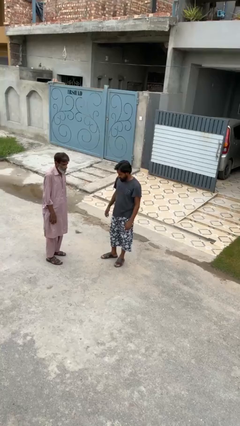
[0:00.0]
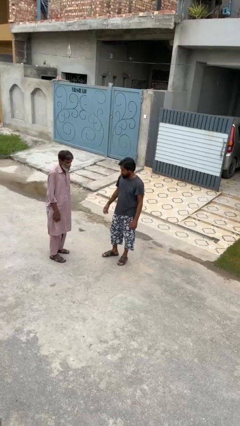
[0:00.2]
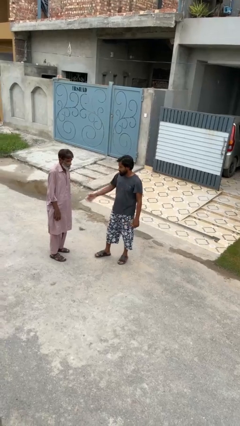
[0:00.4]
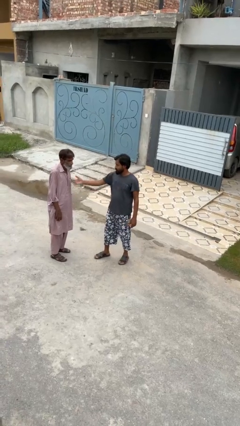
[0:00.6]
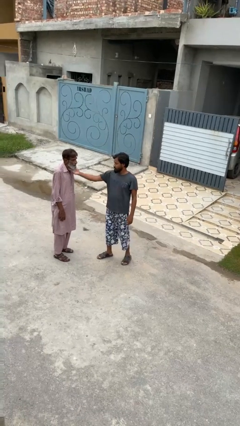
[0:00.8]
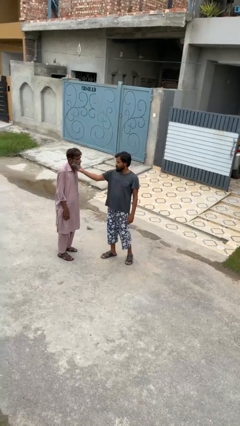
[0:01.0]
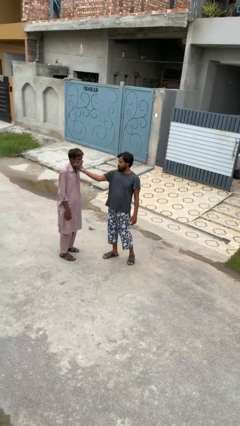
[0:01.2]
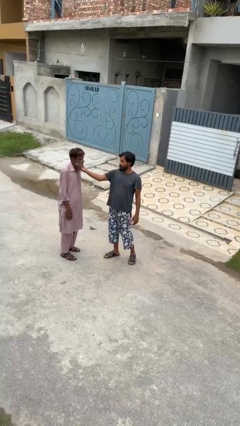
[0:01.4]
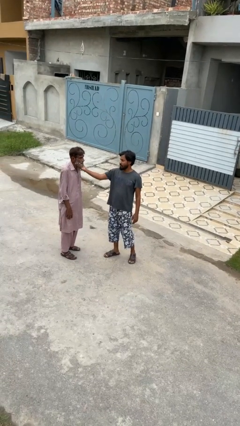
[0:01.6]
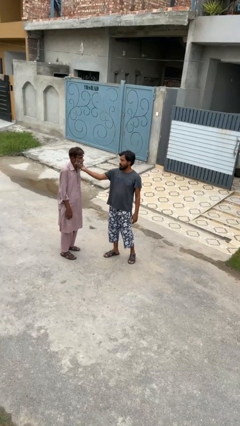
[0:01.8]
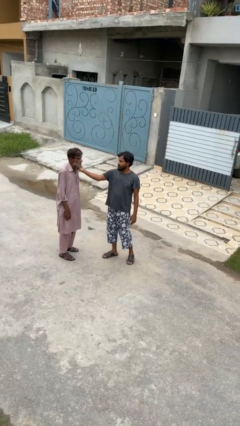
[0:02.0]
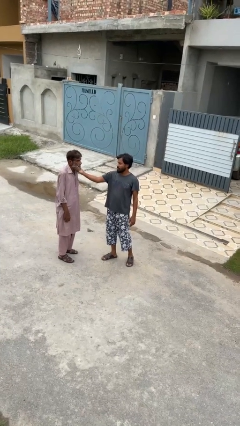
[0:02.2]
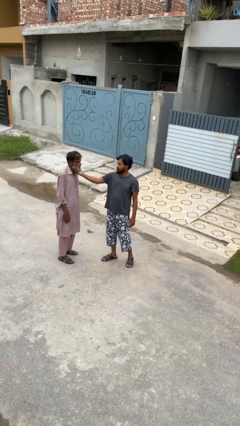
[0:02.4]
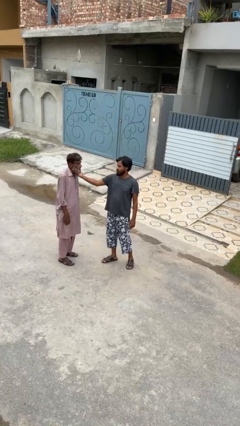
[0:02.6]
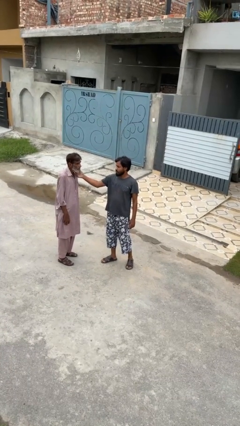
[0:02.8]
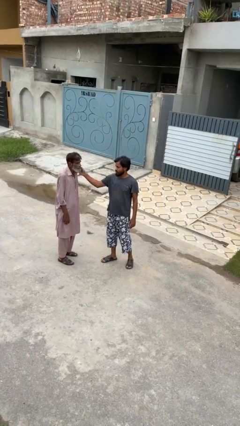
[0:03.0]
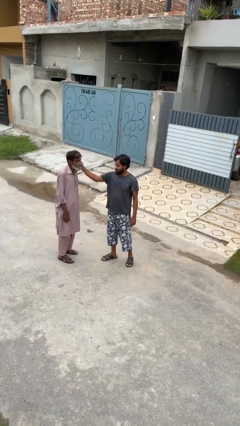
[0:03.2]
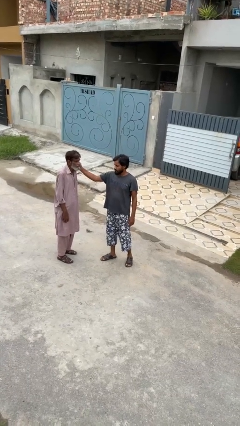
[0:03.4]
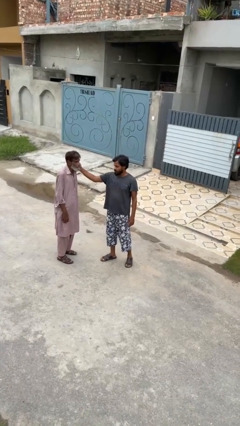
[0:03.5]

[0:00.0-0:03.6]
person touches face of person

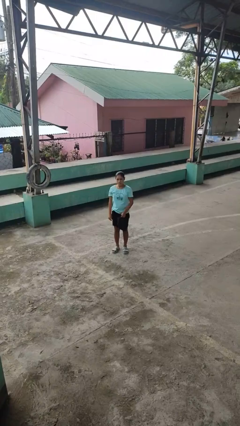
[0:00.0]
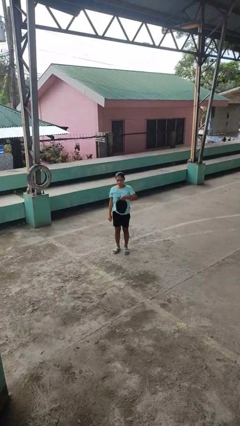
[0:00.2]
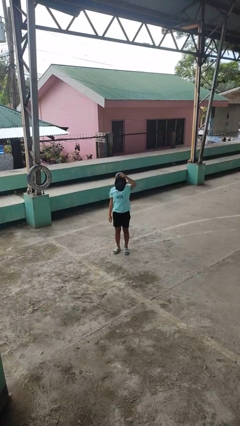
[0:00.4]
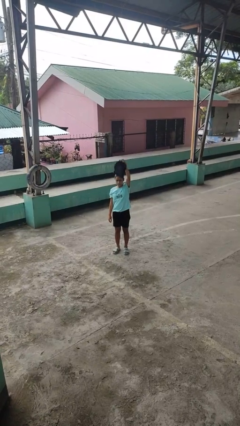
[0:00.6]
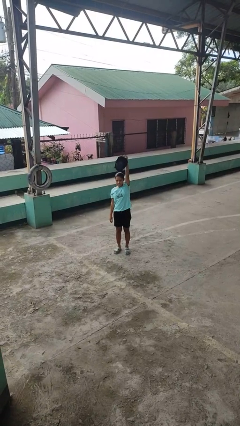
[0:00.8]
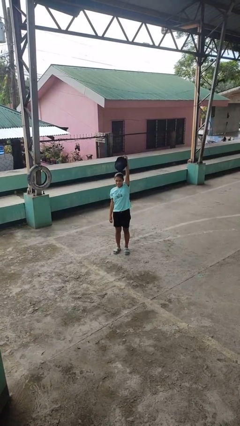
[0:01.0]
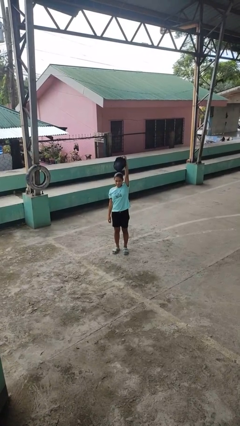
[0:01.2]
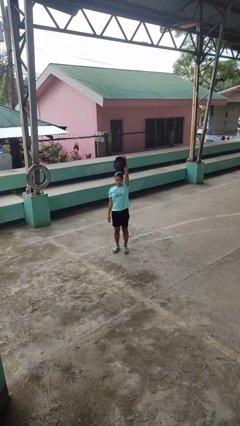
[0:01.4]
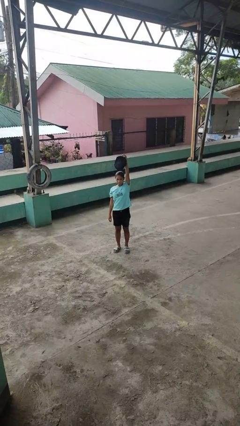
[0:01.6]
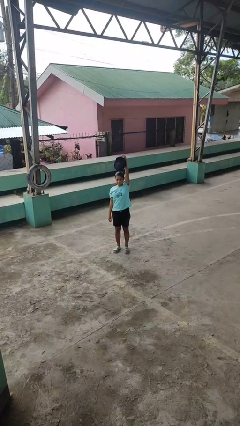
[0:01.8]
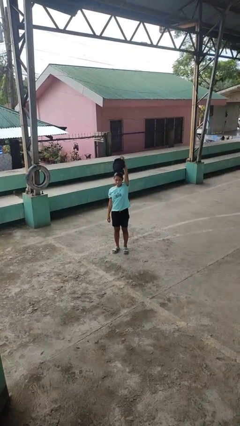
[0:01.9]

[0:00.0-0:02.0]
person holds object above head

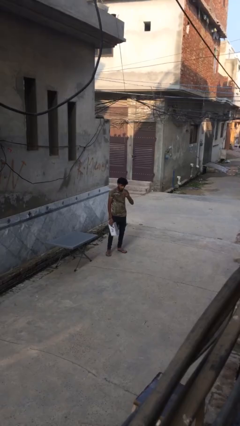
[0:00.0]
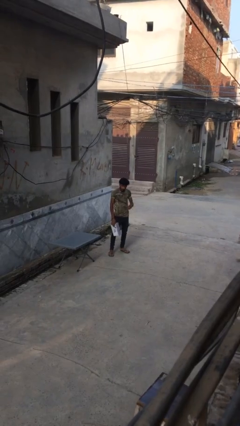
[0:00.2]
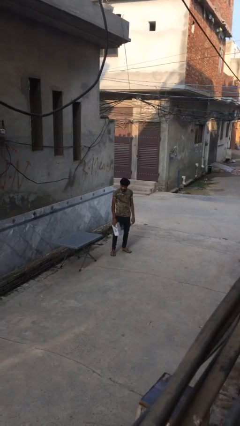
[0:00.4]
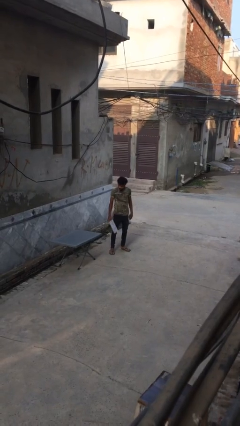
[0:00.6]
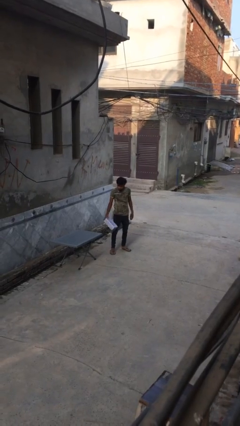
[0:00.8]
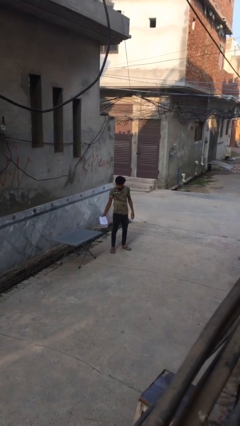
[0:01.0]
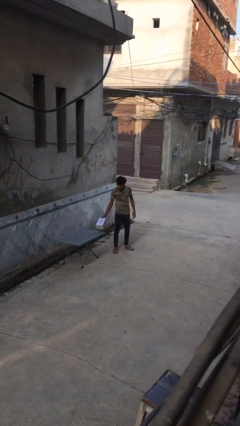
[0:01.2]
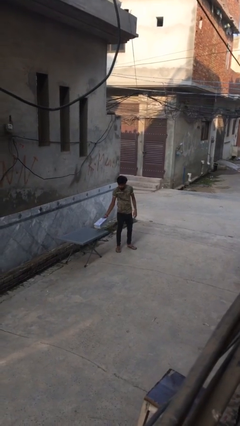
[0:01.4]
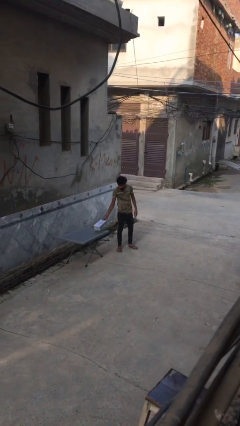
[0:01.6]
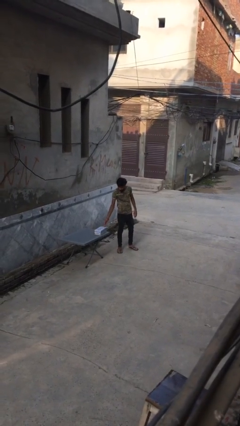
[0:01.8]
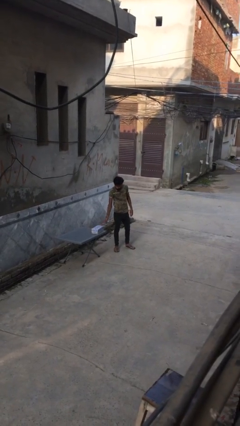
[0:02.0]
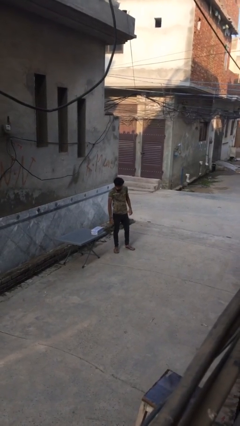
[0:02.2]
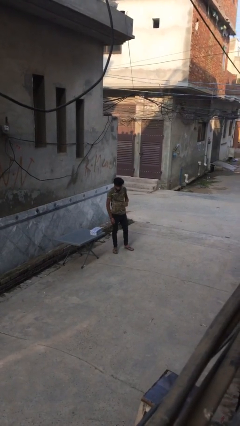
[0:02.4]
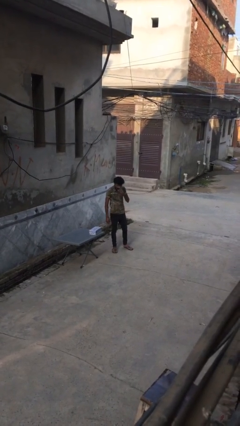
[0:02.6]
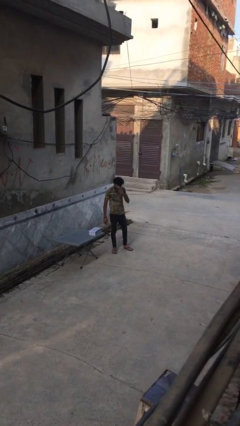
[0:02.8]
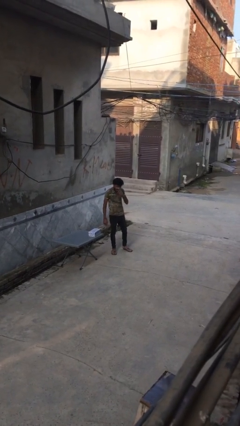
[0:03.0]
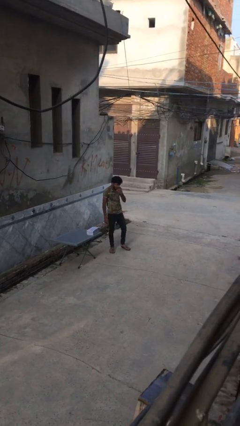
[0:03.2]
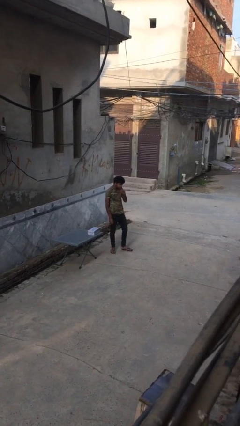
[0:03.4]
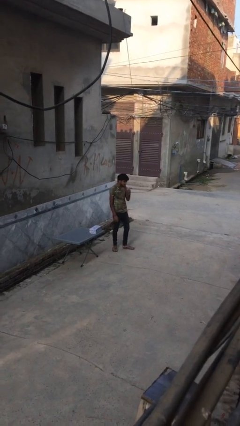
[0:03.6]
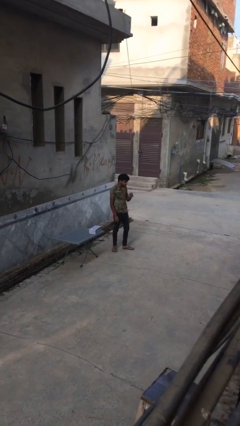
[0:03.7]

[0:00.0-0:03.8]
person puts down object on table

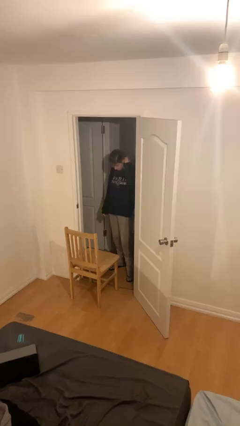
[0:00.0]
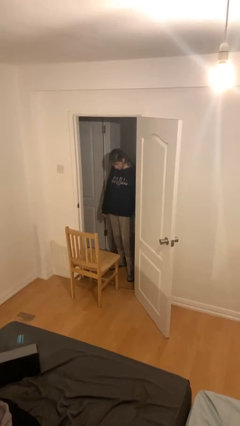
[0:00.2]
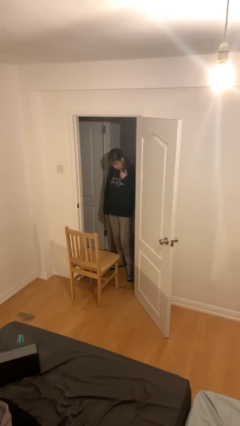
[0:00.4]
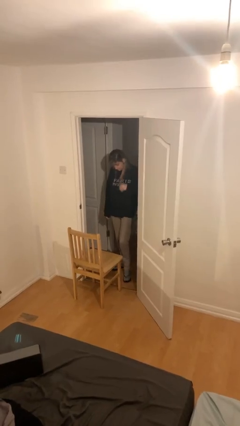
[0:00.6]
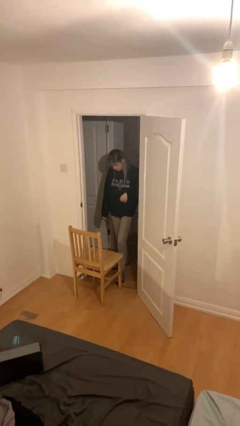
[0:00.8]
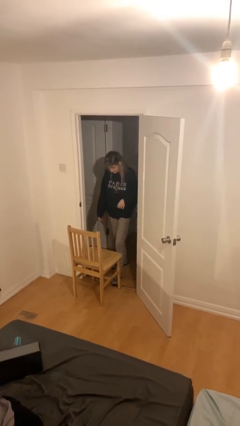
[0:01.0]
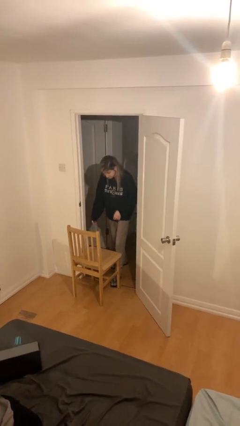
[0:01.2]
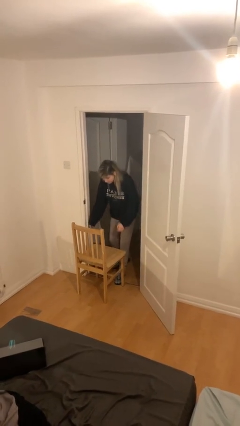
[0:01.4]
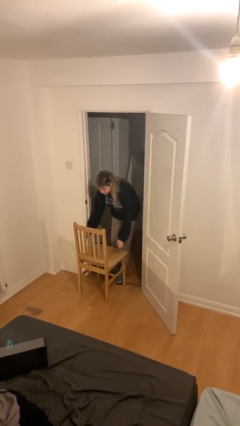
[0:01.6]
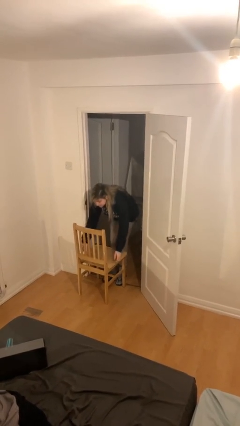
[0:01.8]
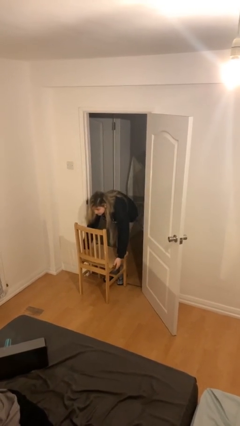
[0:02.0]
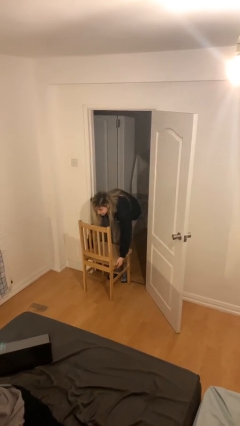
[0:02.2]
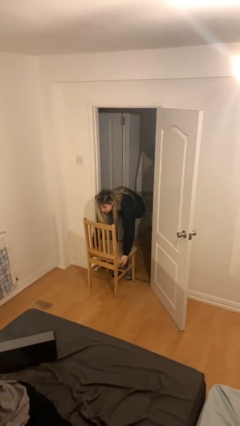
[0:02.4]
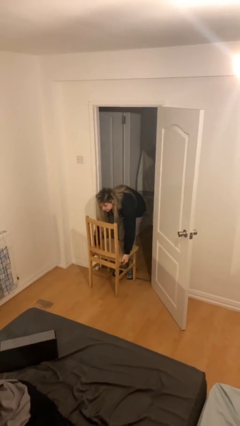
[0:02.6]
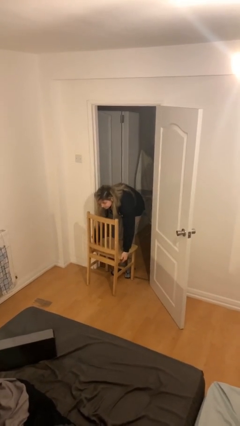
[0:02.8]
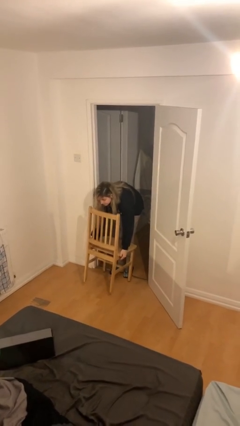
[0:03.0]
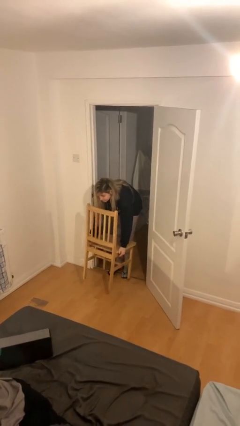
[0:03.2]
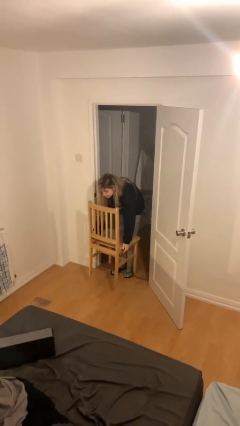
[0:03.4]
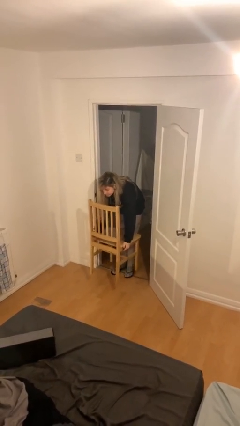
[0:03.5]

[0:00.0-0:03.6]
person picks up object from floor

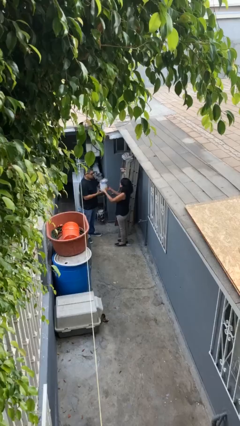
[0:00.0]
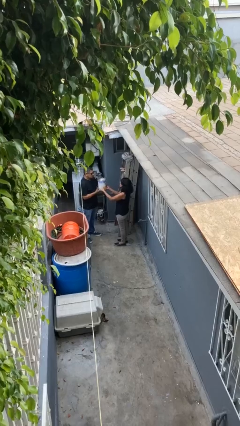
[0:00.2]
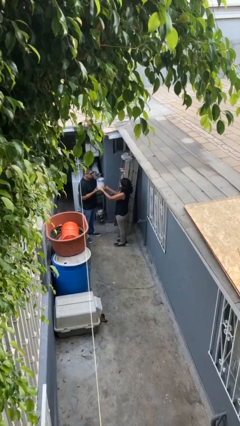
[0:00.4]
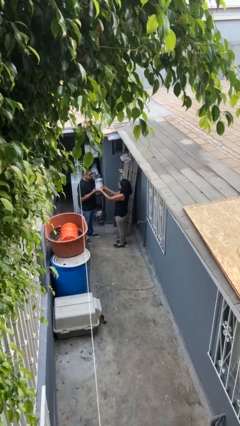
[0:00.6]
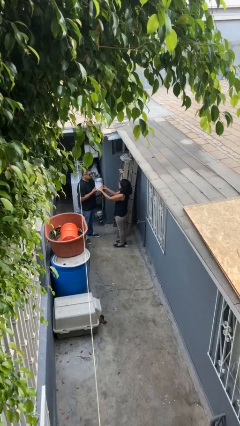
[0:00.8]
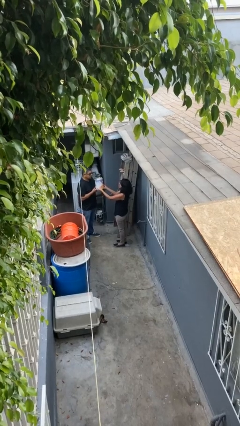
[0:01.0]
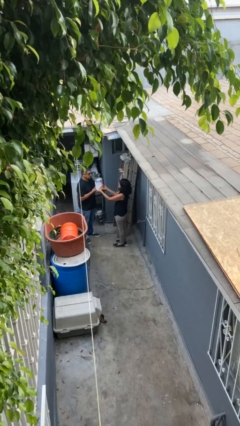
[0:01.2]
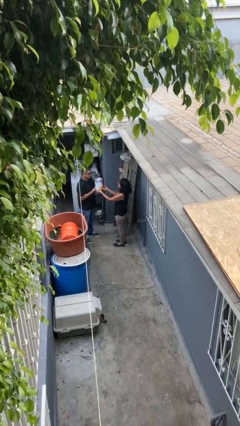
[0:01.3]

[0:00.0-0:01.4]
person transfers object to person

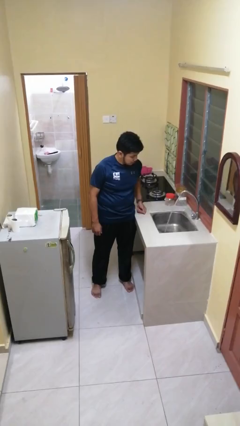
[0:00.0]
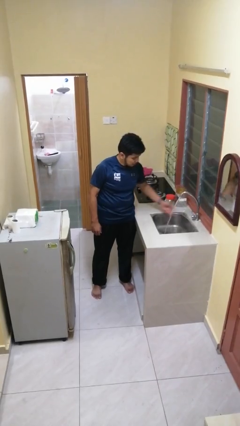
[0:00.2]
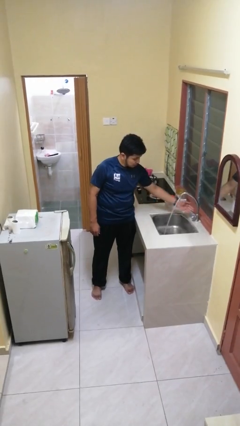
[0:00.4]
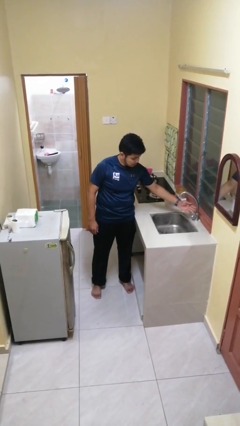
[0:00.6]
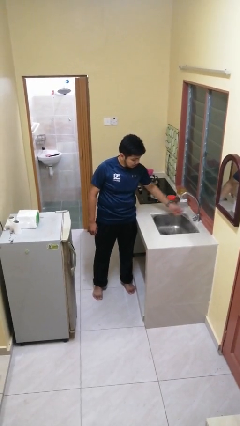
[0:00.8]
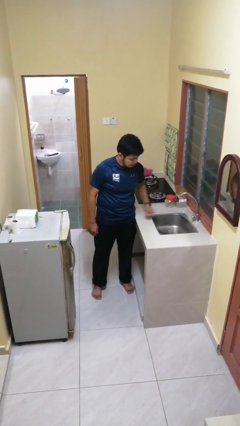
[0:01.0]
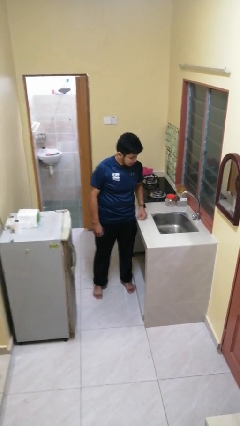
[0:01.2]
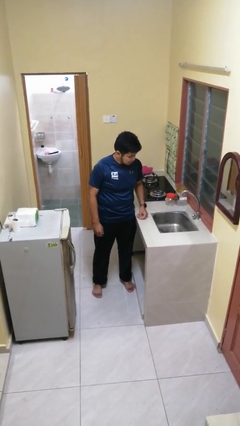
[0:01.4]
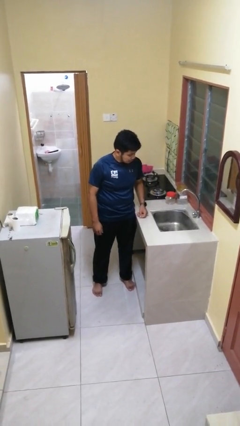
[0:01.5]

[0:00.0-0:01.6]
person turns off faucet

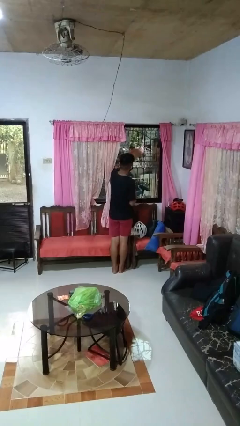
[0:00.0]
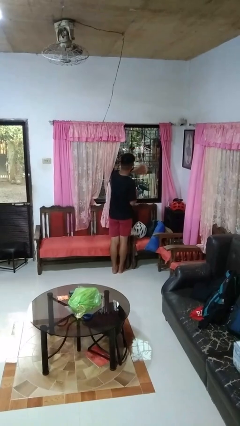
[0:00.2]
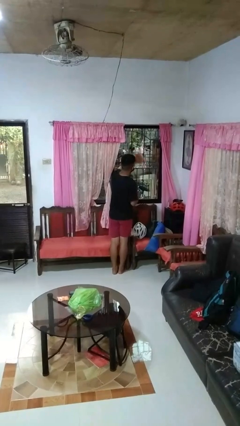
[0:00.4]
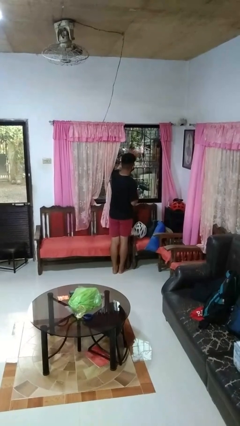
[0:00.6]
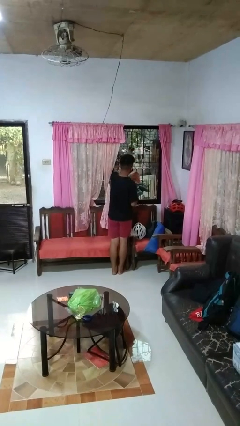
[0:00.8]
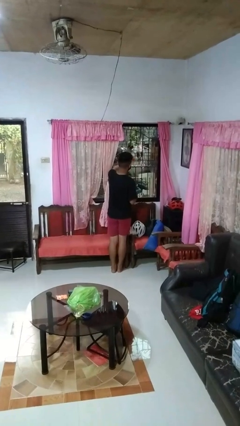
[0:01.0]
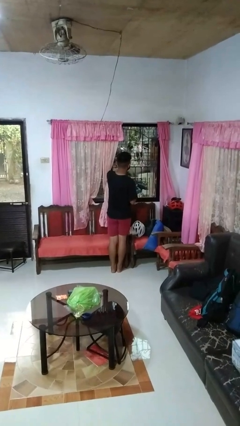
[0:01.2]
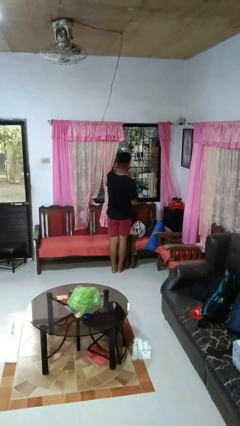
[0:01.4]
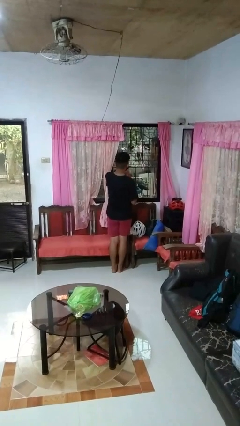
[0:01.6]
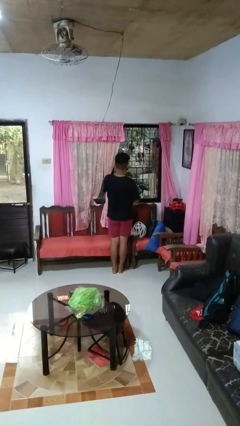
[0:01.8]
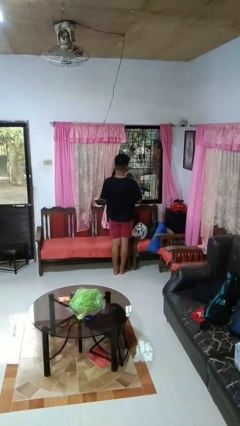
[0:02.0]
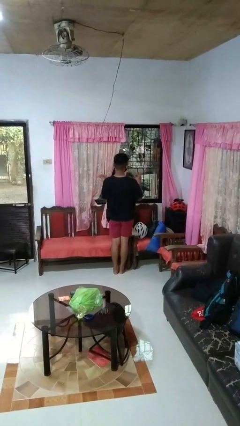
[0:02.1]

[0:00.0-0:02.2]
person washes window
